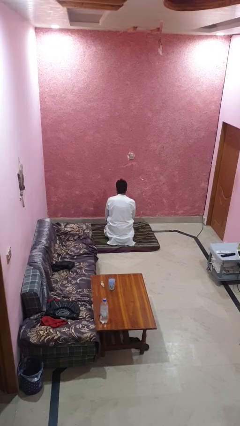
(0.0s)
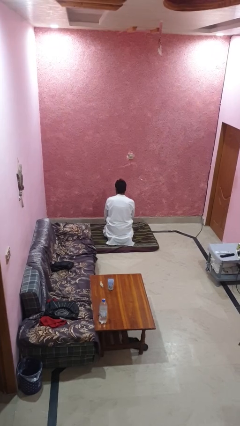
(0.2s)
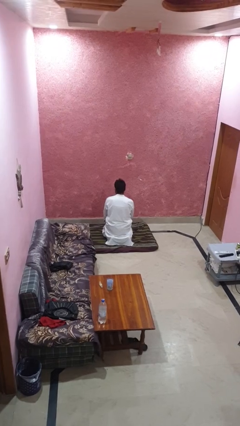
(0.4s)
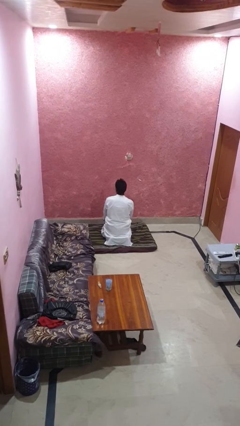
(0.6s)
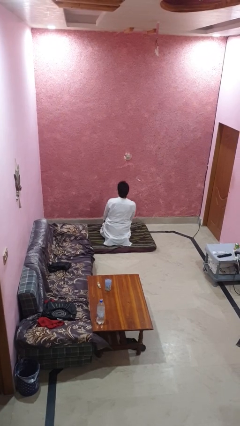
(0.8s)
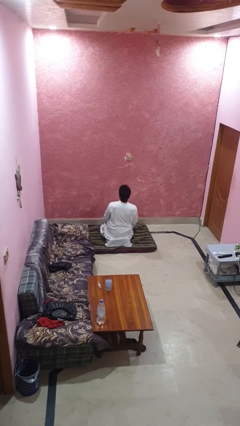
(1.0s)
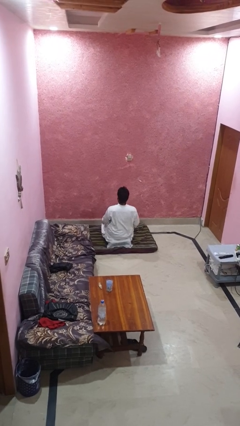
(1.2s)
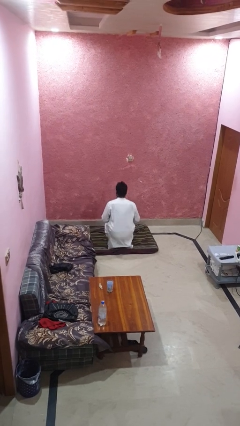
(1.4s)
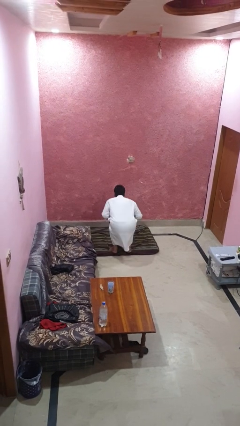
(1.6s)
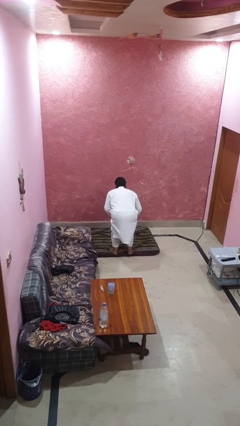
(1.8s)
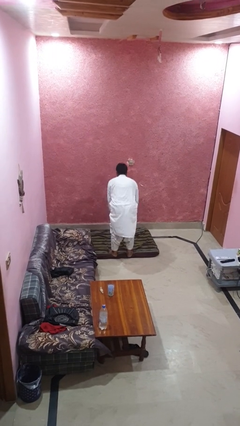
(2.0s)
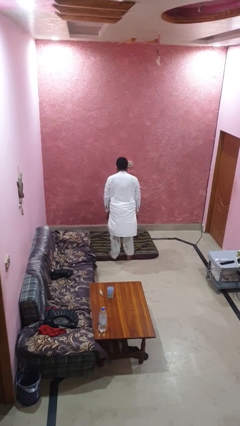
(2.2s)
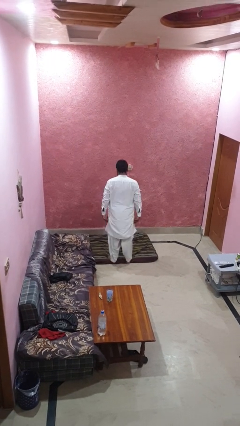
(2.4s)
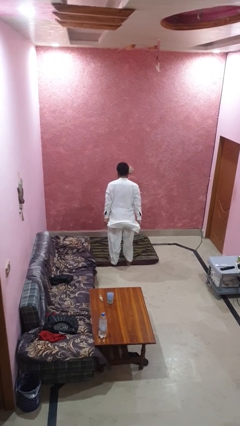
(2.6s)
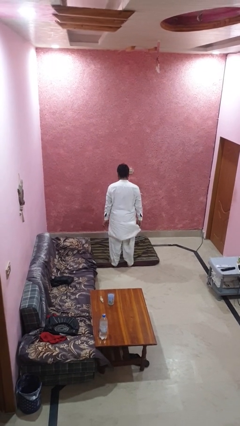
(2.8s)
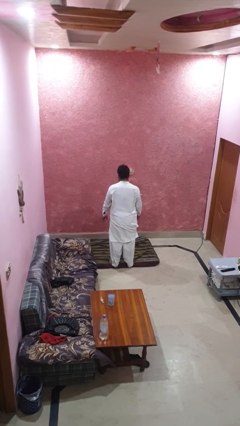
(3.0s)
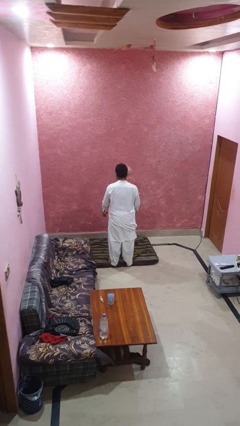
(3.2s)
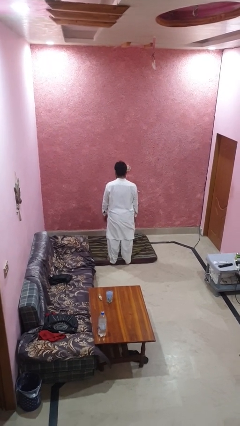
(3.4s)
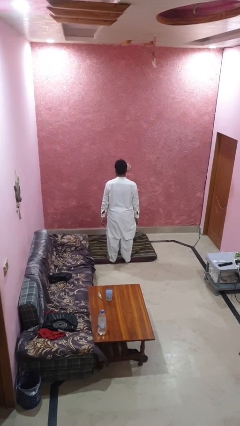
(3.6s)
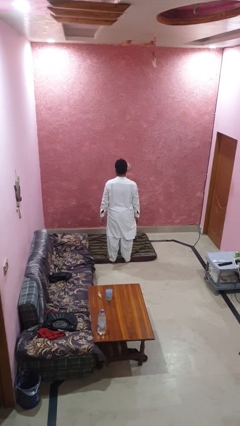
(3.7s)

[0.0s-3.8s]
person stands up from floor

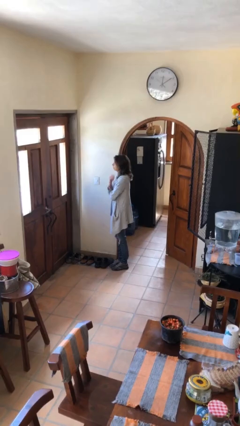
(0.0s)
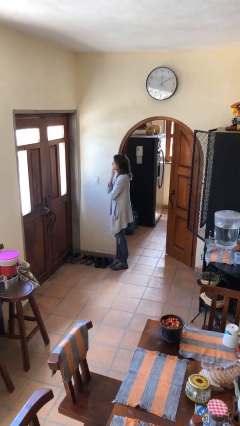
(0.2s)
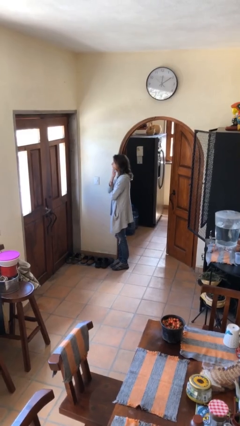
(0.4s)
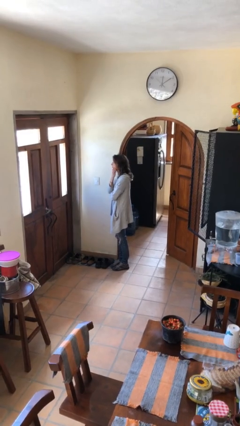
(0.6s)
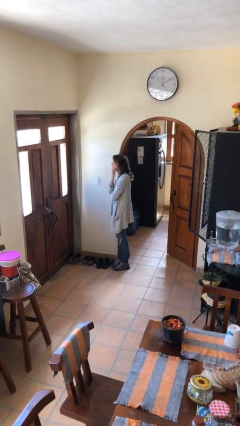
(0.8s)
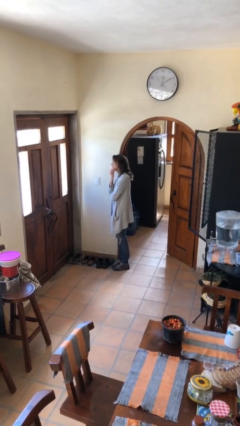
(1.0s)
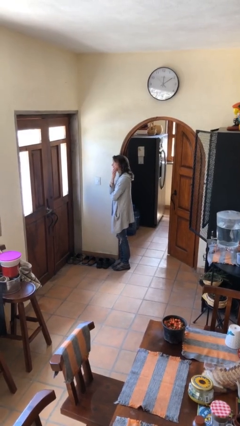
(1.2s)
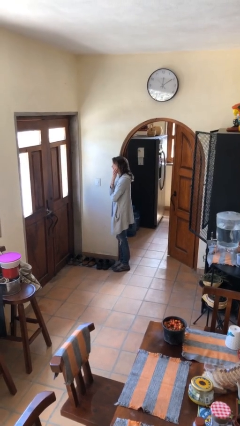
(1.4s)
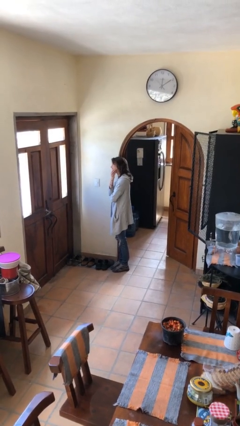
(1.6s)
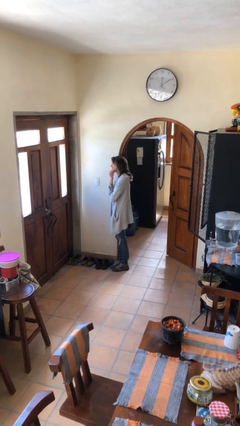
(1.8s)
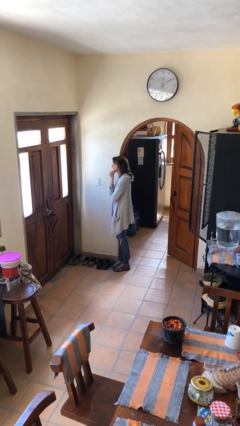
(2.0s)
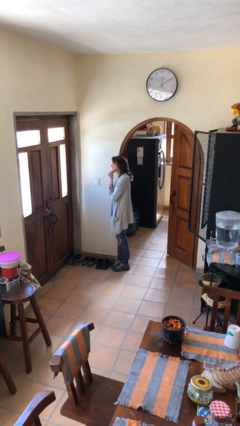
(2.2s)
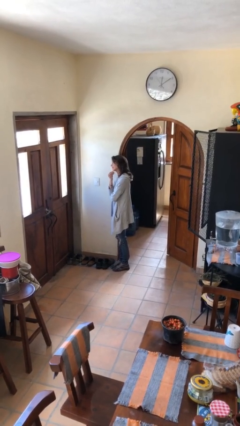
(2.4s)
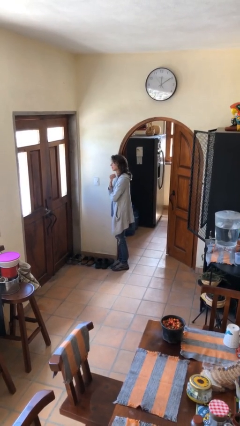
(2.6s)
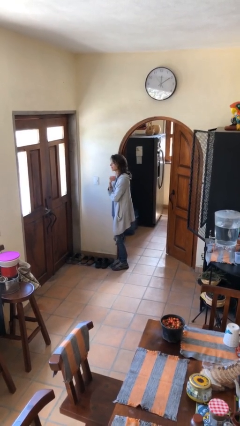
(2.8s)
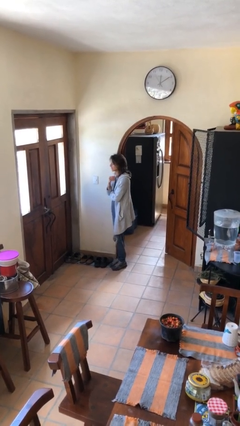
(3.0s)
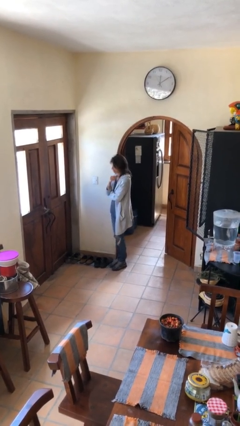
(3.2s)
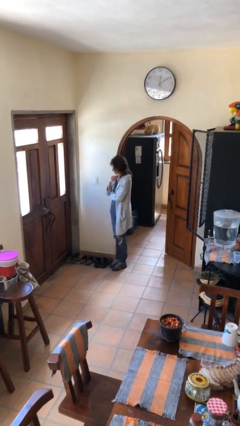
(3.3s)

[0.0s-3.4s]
person strokes chin

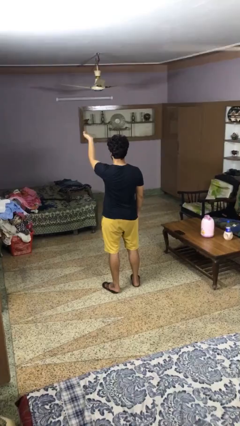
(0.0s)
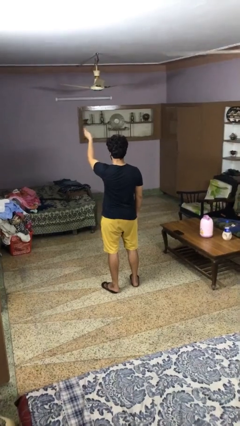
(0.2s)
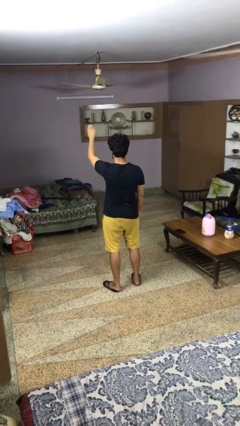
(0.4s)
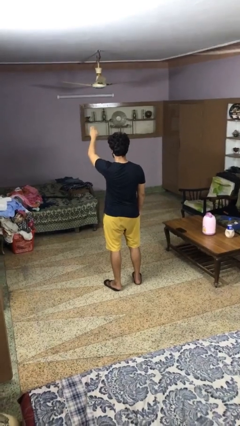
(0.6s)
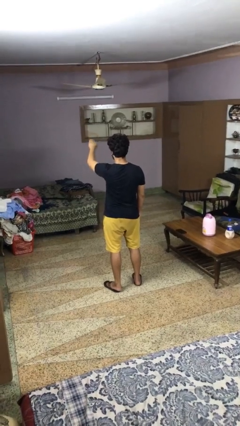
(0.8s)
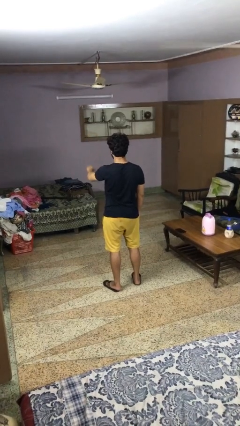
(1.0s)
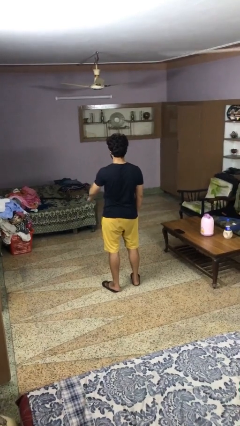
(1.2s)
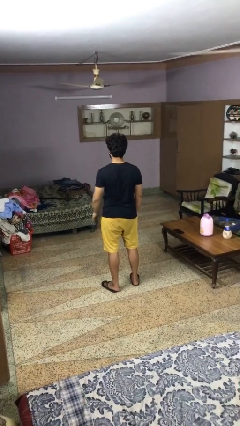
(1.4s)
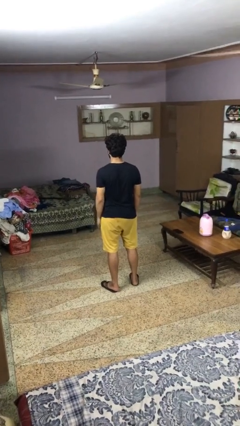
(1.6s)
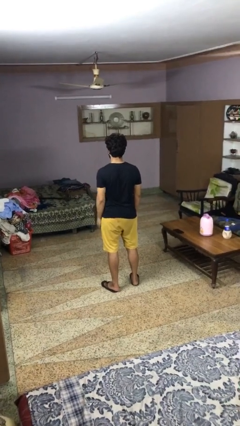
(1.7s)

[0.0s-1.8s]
person gestures swipe down

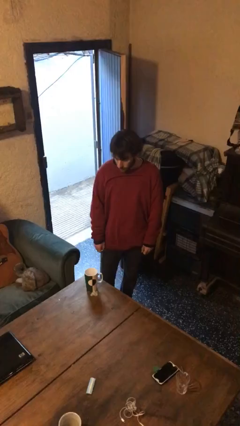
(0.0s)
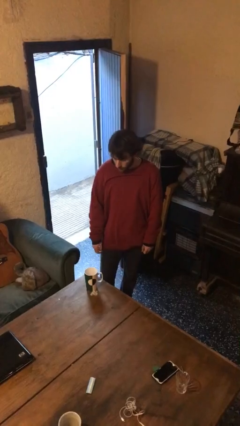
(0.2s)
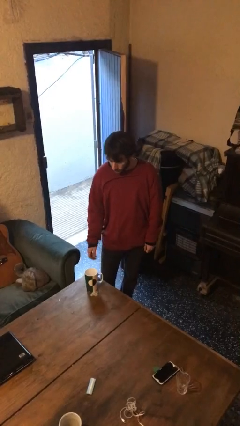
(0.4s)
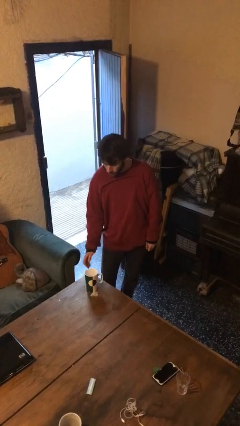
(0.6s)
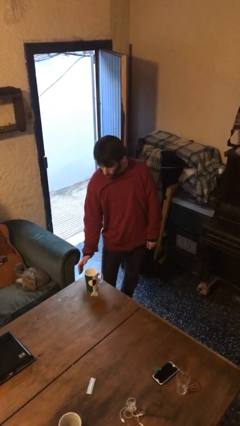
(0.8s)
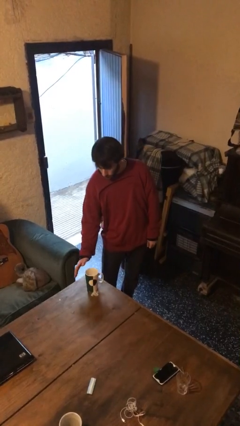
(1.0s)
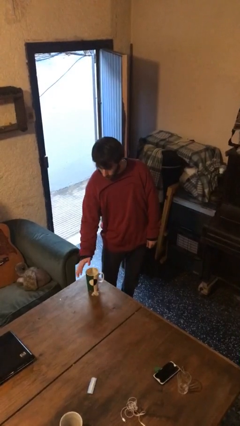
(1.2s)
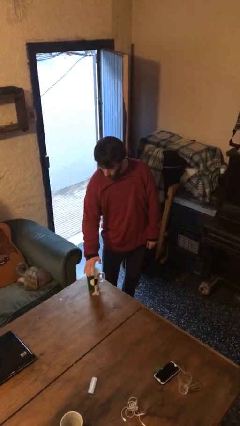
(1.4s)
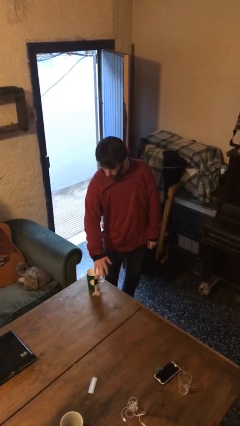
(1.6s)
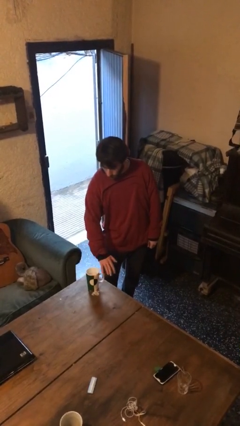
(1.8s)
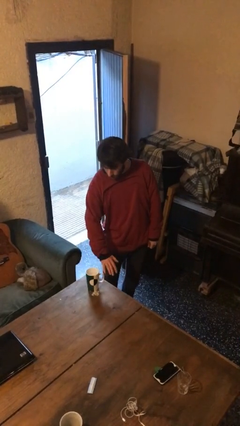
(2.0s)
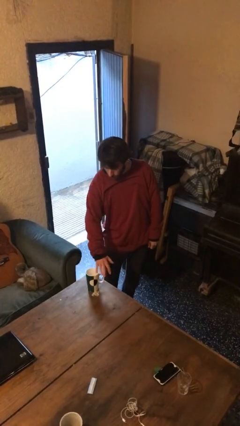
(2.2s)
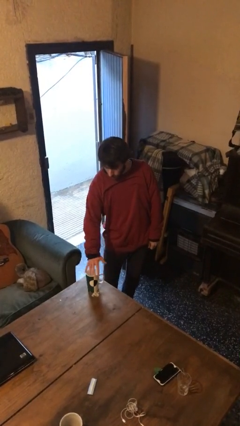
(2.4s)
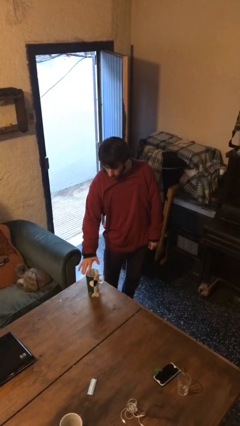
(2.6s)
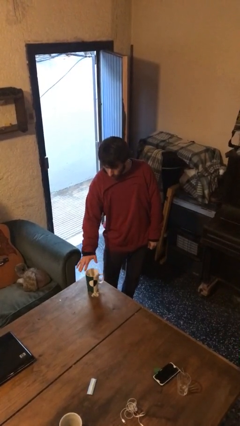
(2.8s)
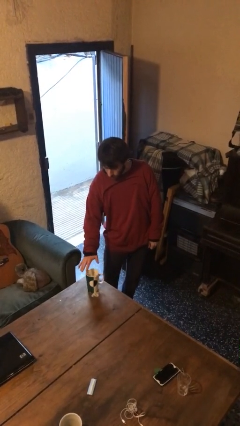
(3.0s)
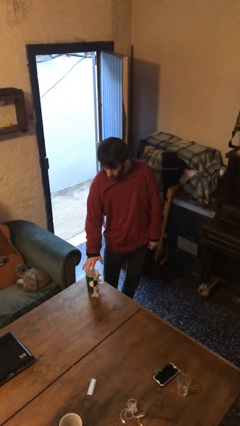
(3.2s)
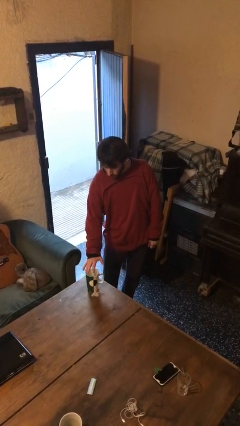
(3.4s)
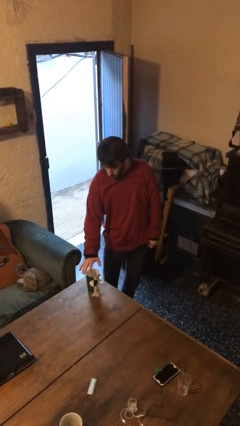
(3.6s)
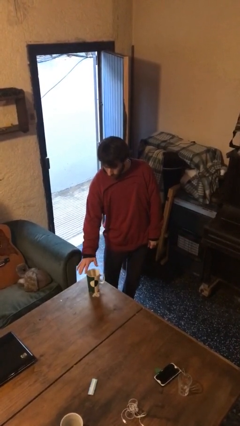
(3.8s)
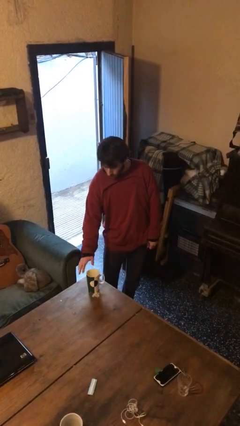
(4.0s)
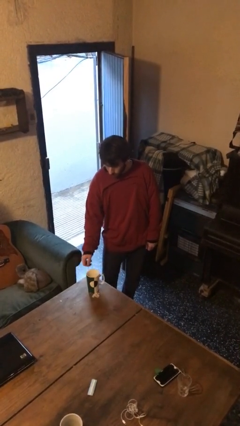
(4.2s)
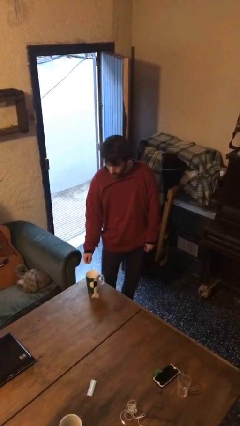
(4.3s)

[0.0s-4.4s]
person waves hand over object

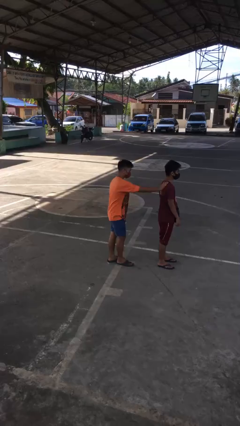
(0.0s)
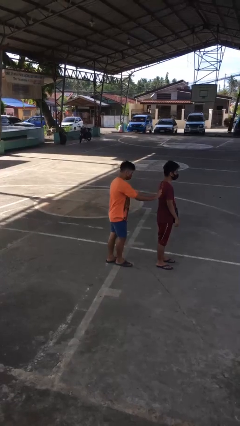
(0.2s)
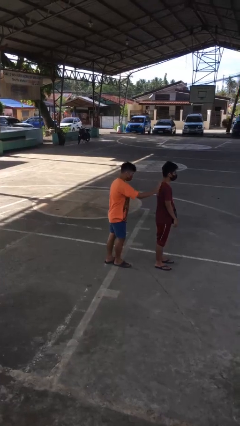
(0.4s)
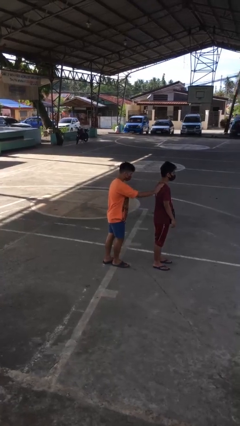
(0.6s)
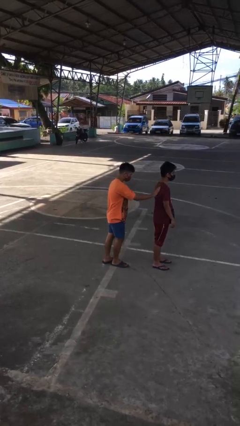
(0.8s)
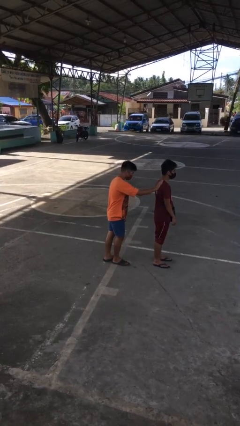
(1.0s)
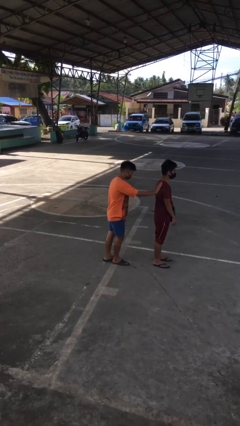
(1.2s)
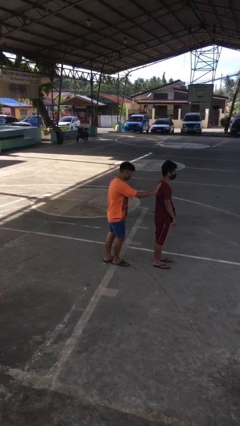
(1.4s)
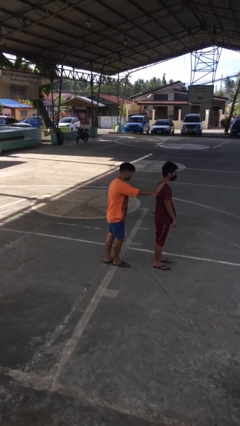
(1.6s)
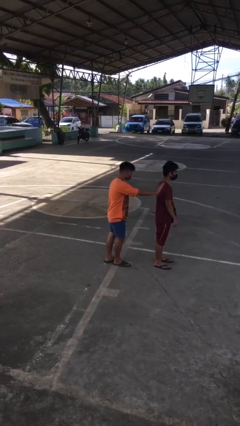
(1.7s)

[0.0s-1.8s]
person touches back of person

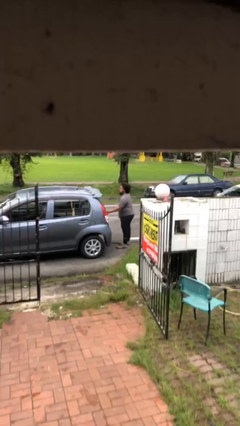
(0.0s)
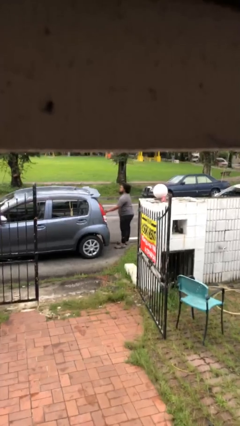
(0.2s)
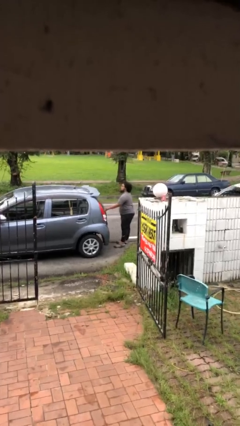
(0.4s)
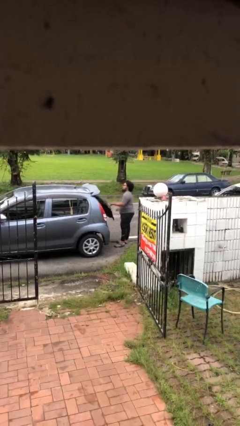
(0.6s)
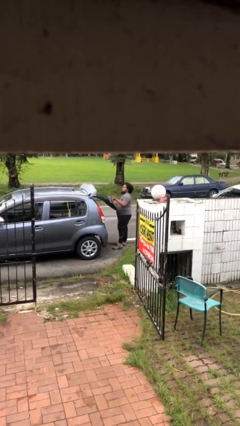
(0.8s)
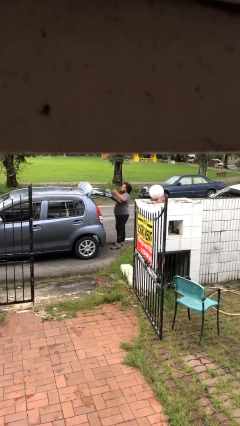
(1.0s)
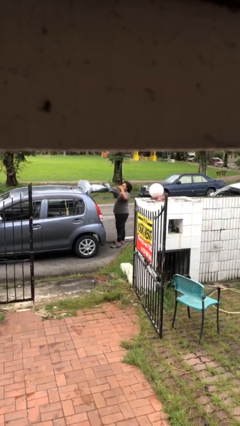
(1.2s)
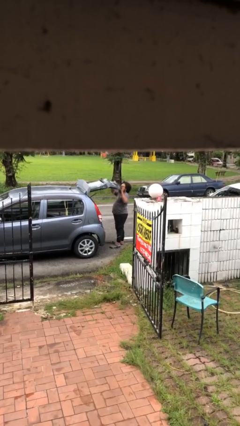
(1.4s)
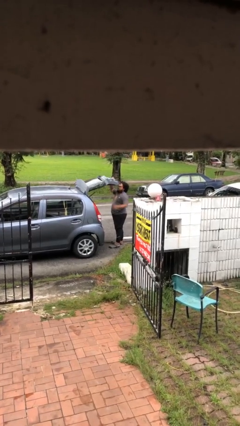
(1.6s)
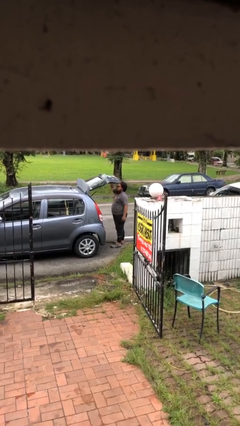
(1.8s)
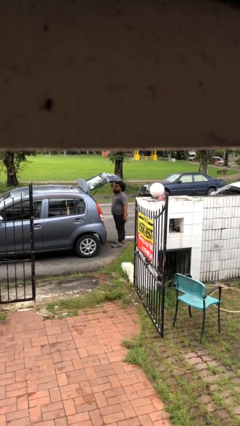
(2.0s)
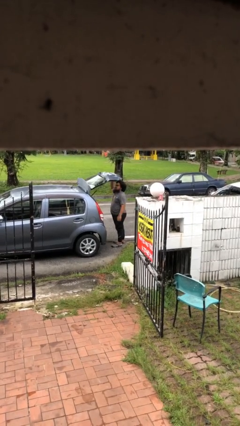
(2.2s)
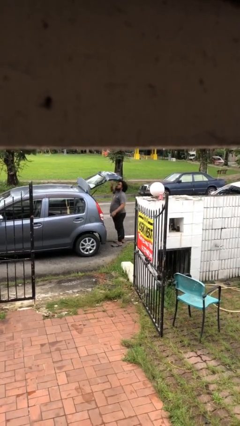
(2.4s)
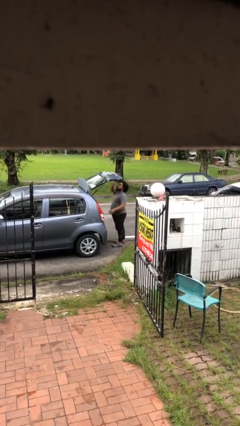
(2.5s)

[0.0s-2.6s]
person opens car trunk
